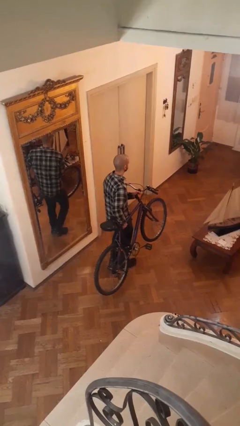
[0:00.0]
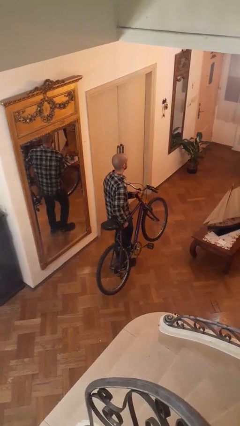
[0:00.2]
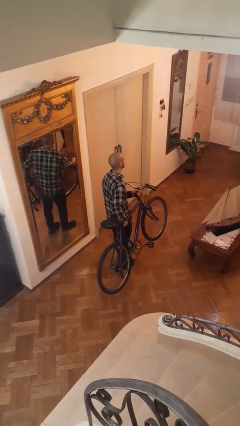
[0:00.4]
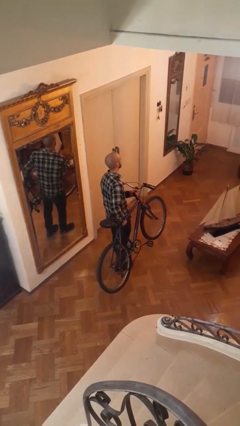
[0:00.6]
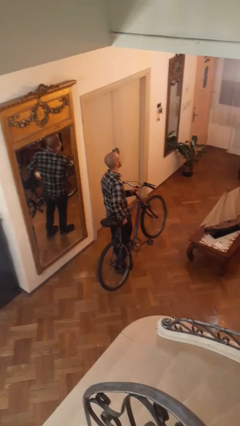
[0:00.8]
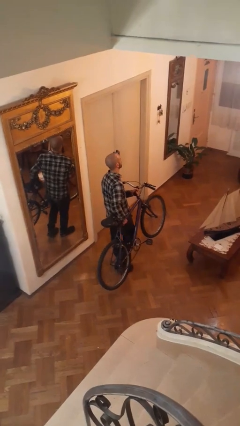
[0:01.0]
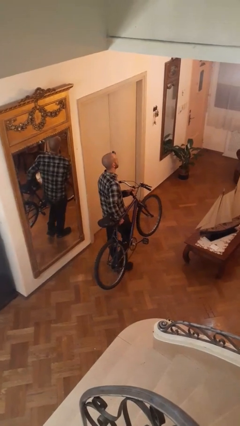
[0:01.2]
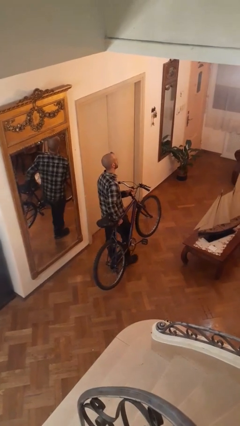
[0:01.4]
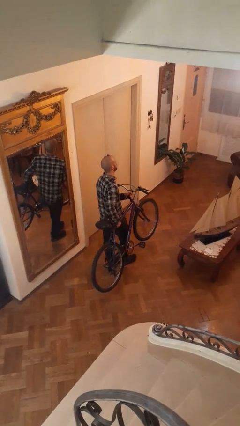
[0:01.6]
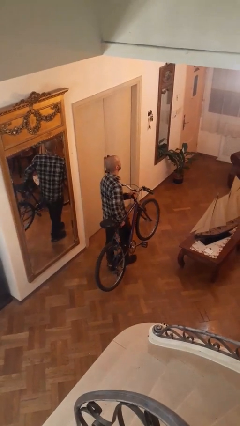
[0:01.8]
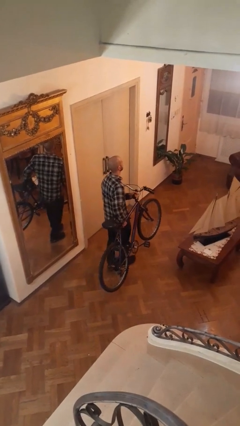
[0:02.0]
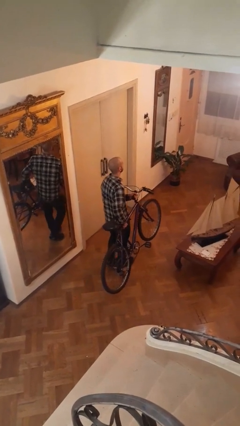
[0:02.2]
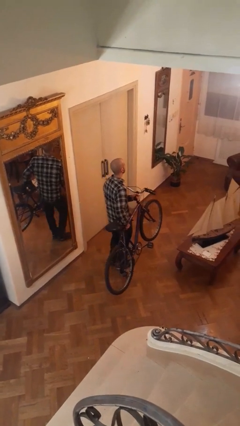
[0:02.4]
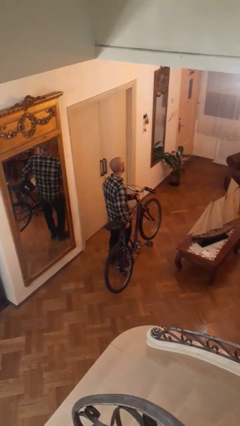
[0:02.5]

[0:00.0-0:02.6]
person carries bicycle

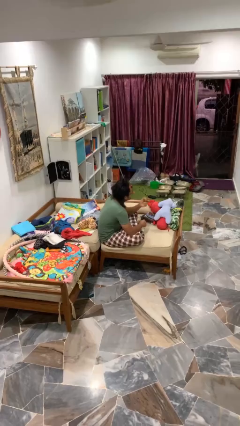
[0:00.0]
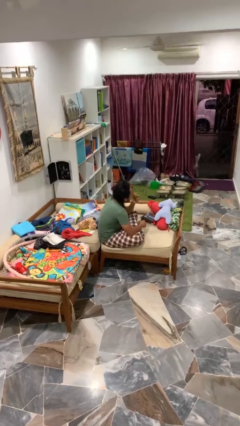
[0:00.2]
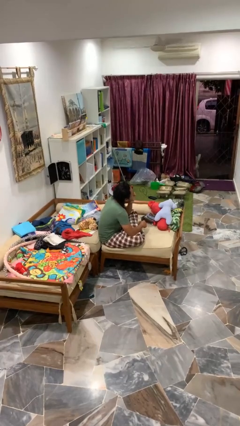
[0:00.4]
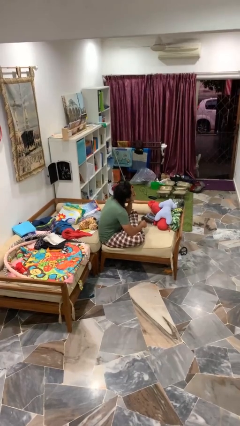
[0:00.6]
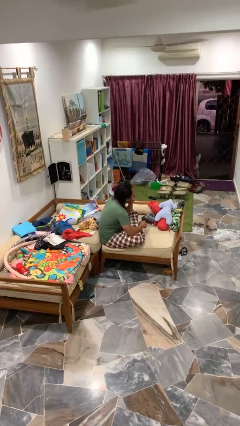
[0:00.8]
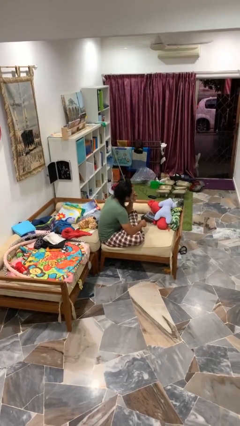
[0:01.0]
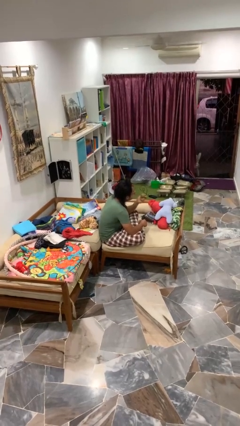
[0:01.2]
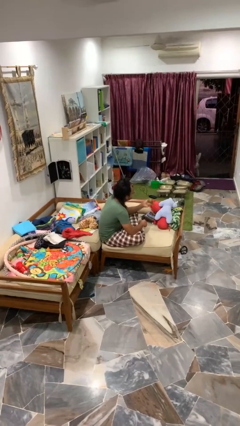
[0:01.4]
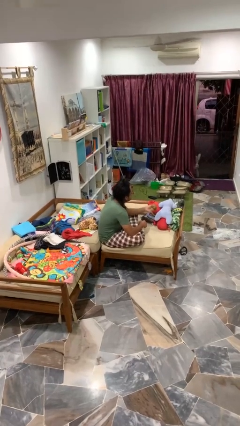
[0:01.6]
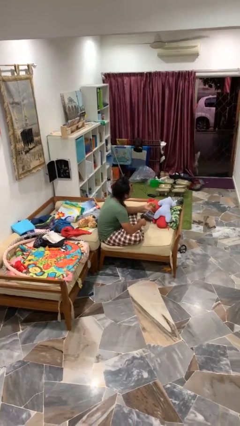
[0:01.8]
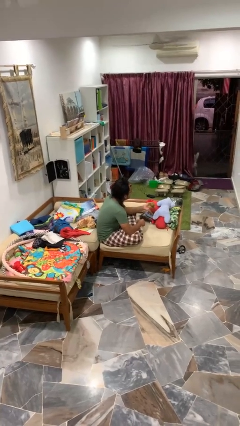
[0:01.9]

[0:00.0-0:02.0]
person eats apple

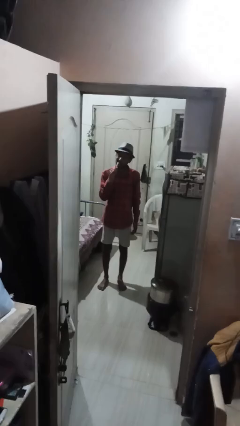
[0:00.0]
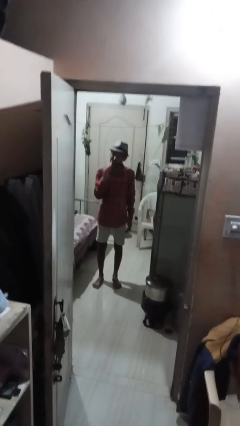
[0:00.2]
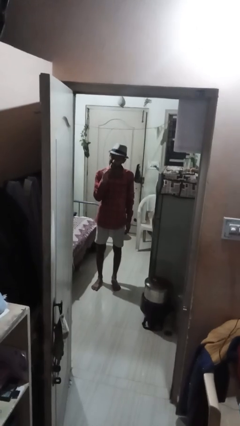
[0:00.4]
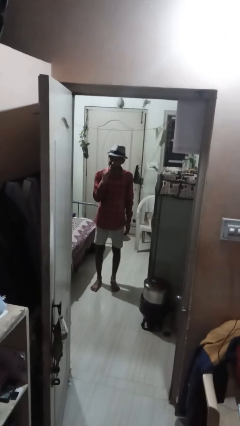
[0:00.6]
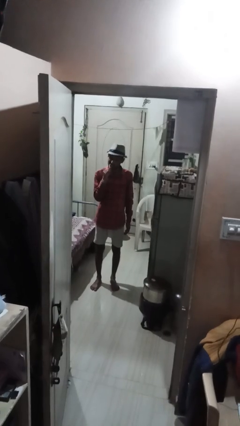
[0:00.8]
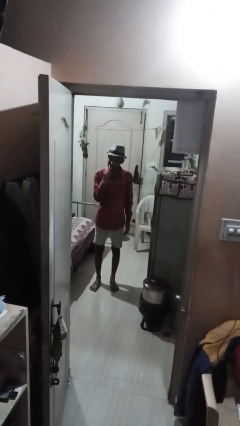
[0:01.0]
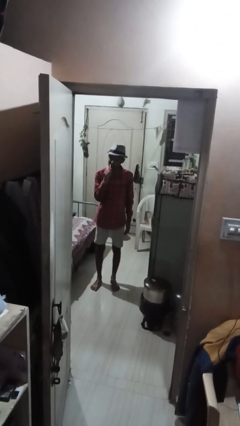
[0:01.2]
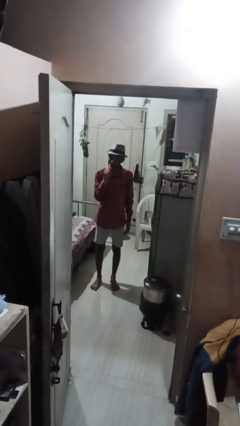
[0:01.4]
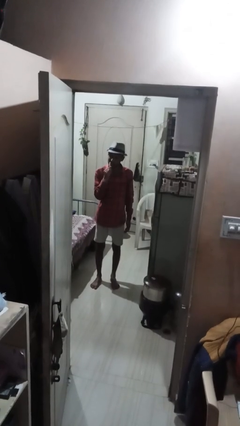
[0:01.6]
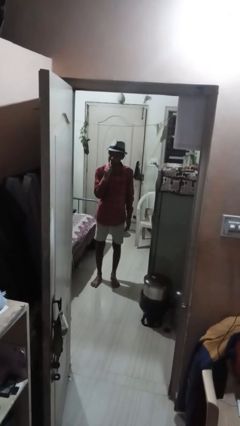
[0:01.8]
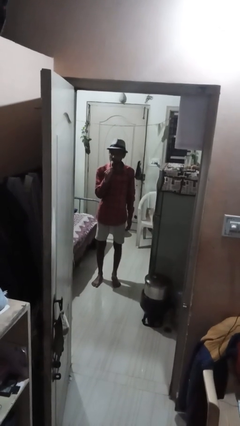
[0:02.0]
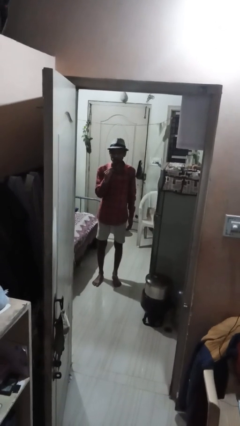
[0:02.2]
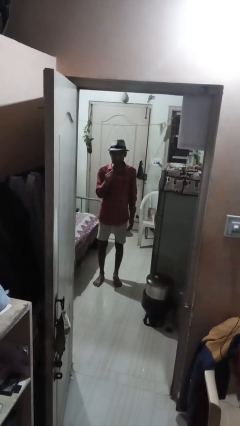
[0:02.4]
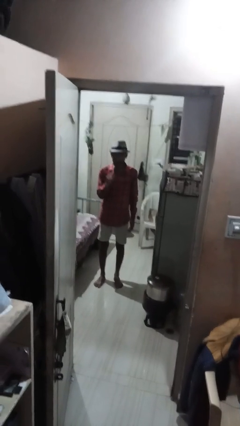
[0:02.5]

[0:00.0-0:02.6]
person brushes teeth

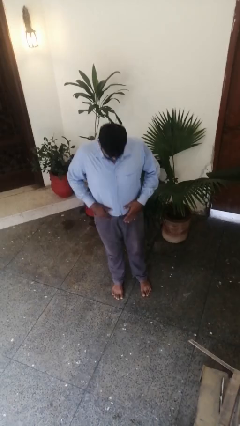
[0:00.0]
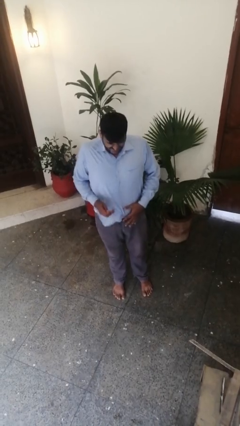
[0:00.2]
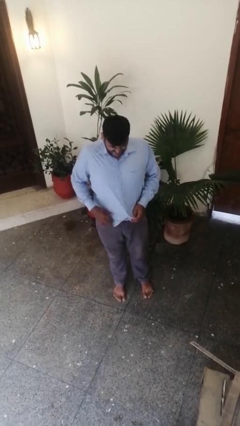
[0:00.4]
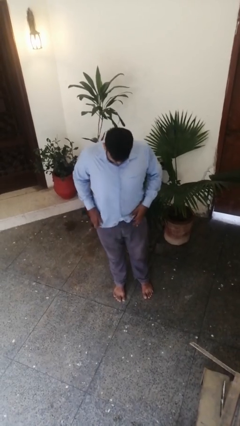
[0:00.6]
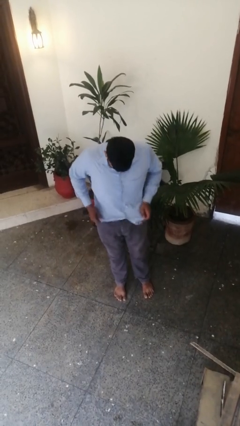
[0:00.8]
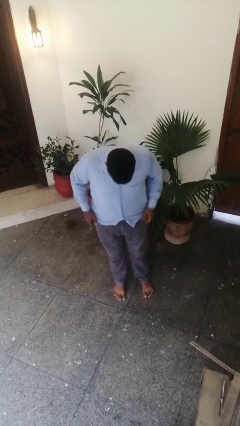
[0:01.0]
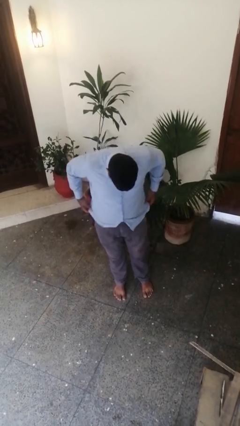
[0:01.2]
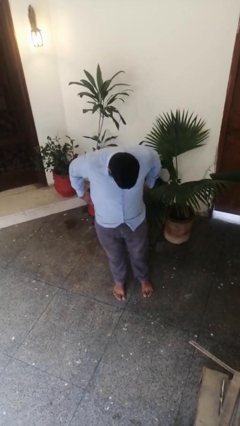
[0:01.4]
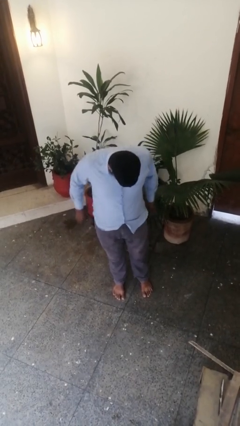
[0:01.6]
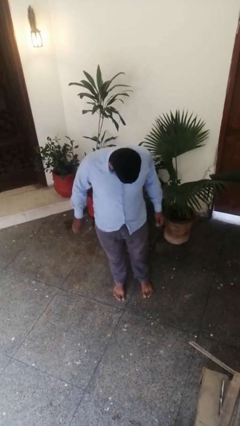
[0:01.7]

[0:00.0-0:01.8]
person untucks shirt

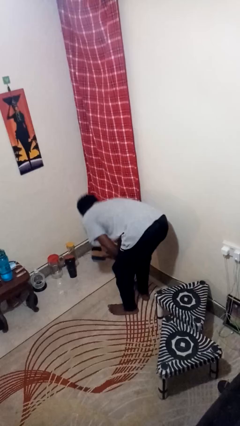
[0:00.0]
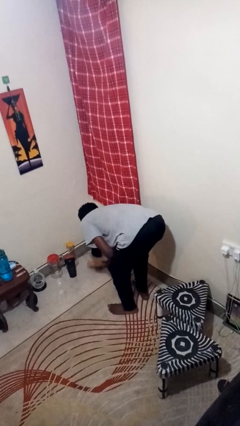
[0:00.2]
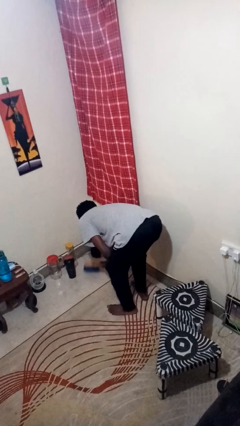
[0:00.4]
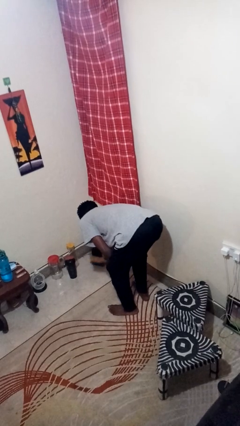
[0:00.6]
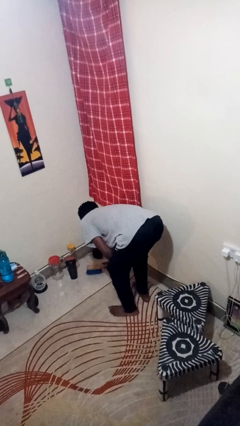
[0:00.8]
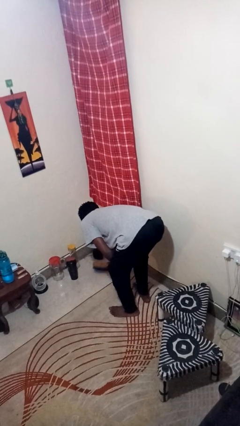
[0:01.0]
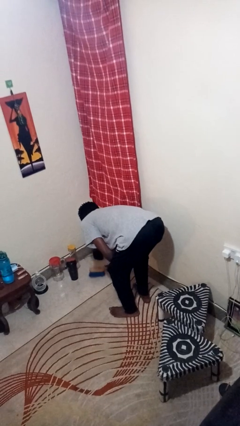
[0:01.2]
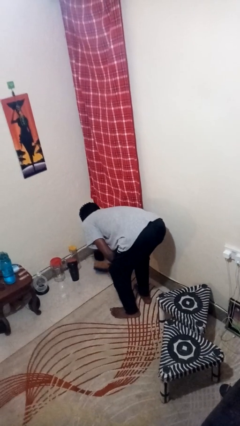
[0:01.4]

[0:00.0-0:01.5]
person sweeps floor

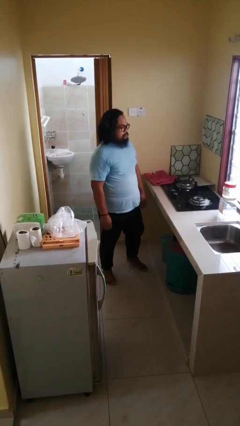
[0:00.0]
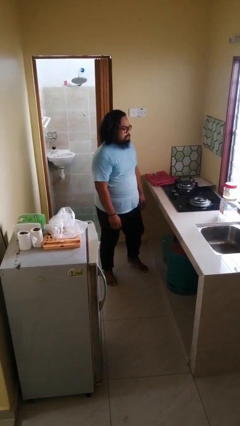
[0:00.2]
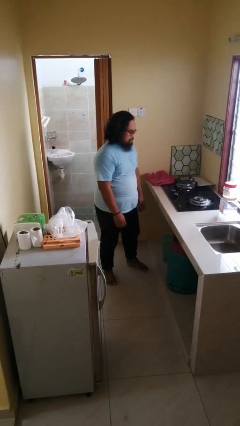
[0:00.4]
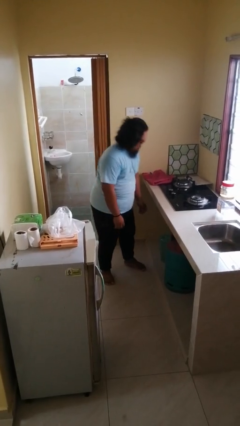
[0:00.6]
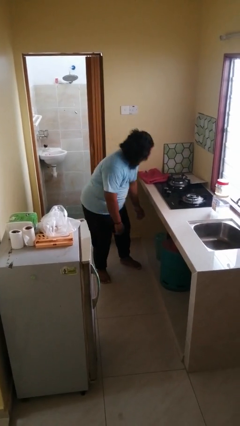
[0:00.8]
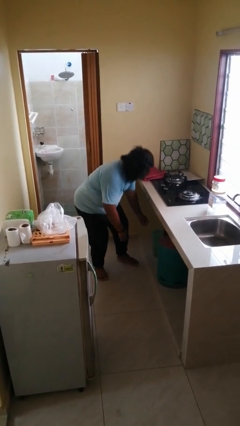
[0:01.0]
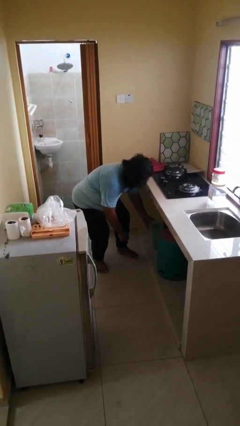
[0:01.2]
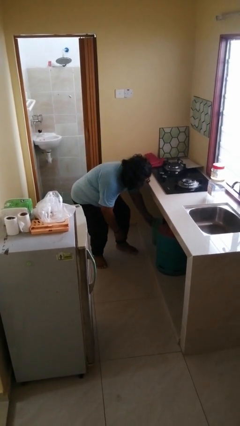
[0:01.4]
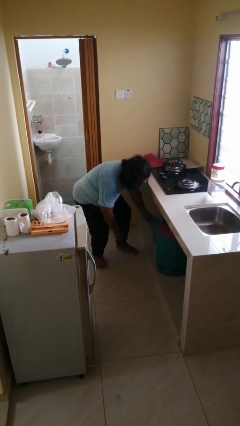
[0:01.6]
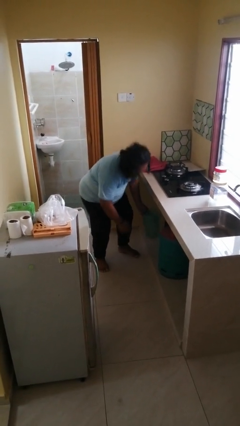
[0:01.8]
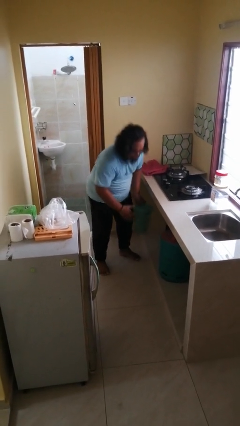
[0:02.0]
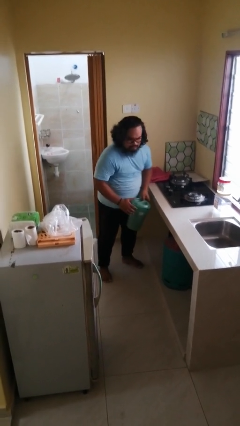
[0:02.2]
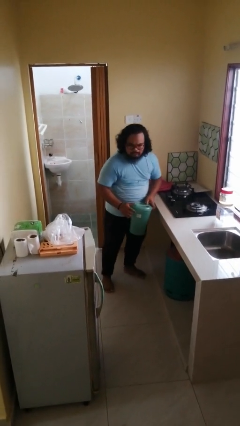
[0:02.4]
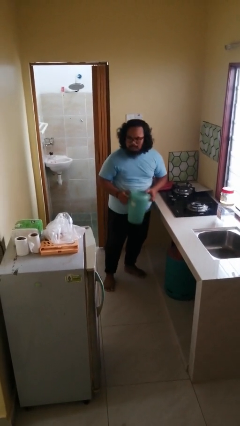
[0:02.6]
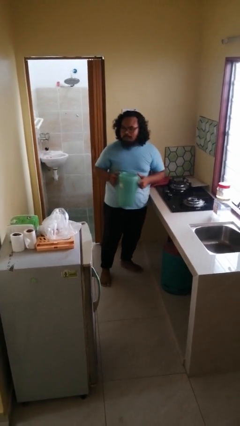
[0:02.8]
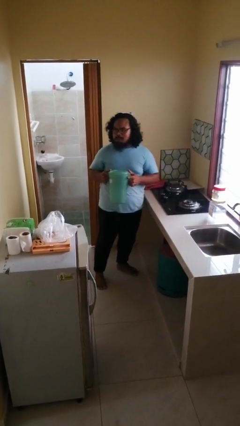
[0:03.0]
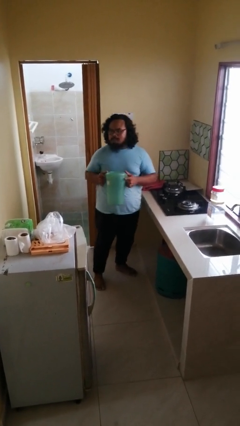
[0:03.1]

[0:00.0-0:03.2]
person picks up object from cabinet

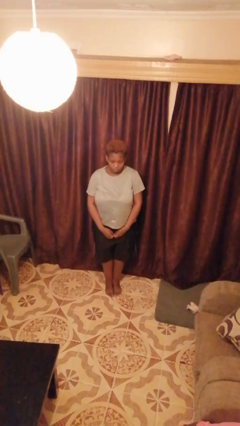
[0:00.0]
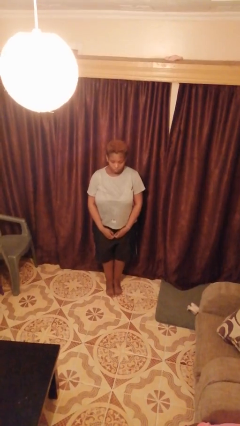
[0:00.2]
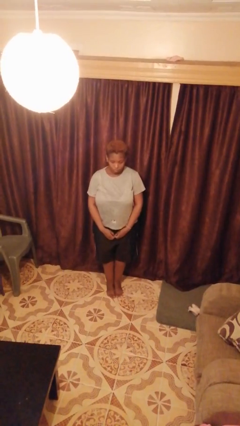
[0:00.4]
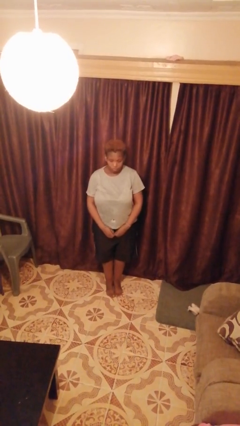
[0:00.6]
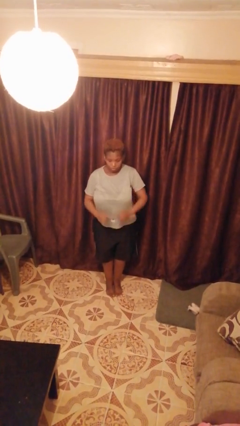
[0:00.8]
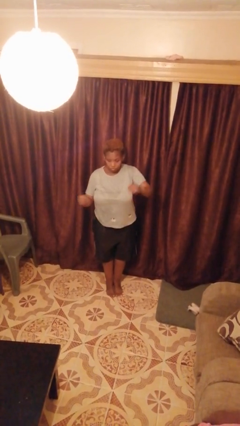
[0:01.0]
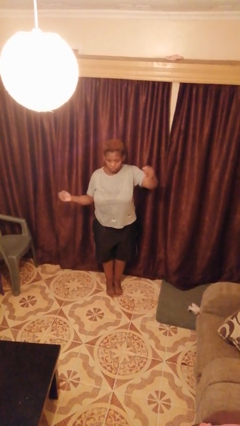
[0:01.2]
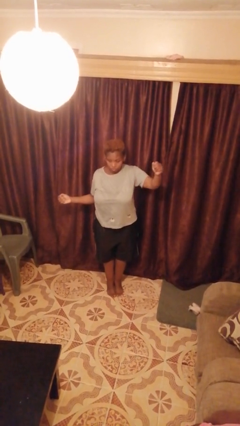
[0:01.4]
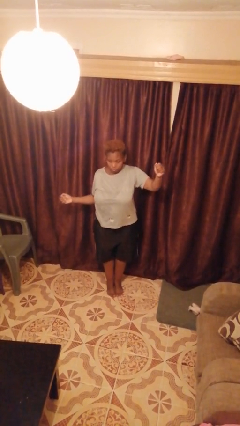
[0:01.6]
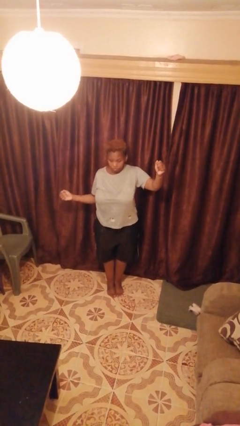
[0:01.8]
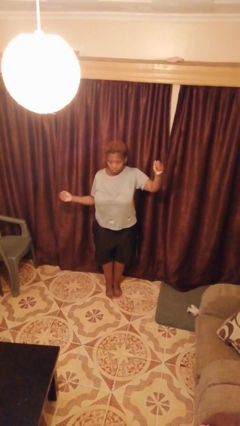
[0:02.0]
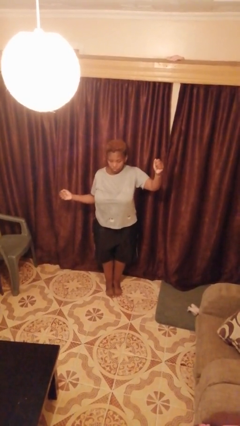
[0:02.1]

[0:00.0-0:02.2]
person gestures zoom in

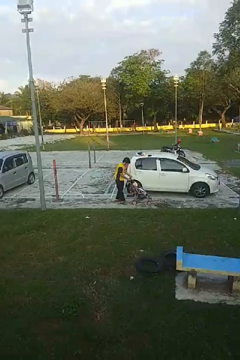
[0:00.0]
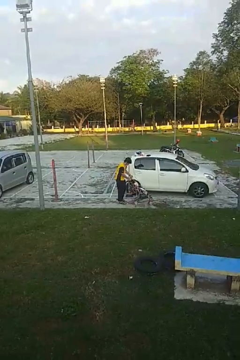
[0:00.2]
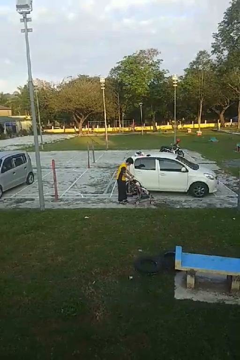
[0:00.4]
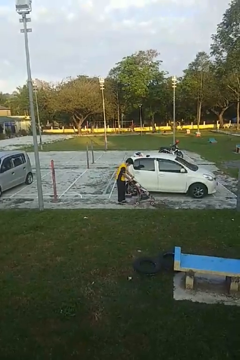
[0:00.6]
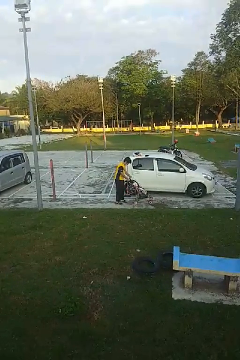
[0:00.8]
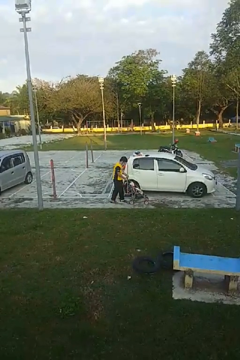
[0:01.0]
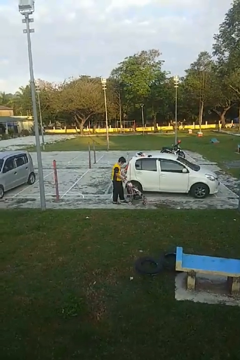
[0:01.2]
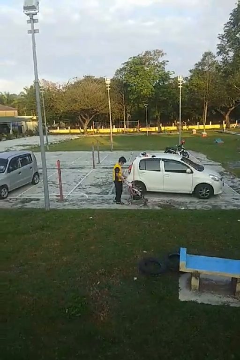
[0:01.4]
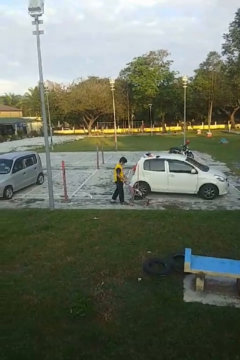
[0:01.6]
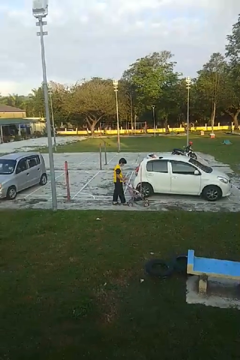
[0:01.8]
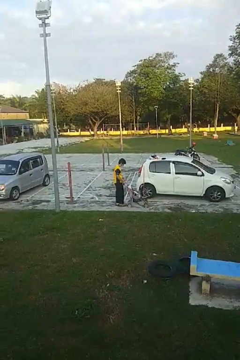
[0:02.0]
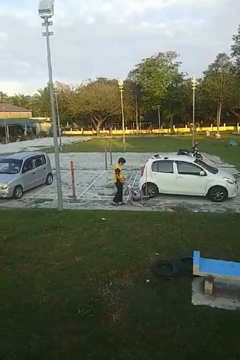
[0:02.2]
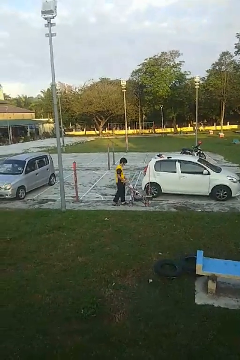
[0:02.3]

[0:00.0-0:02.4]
person pulls wheeled cart
